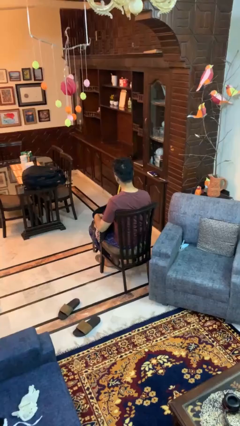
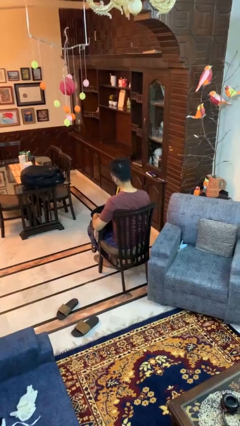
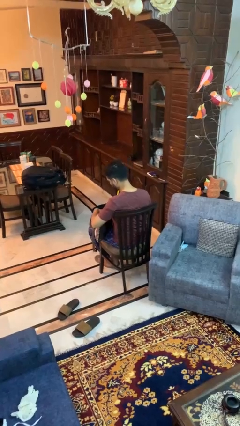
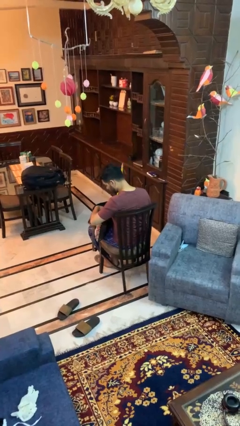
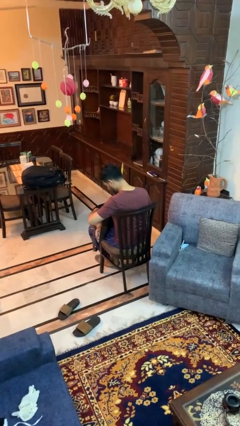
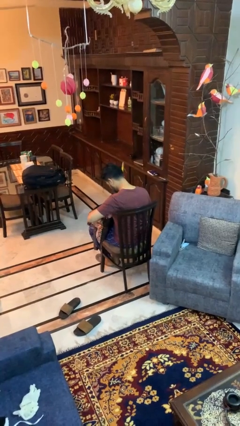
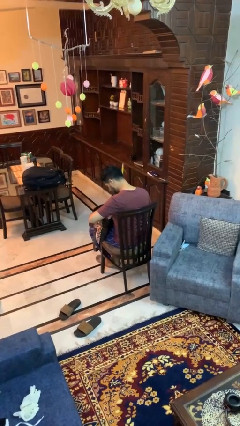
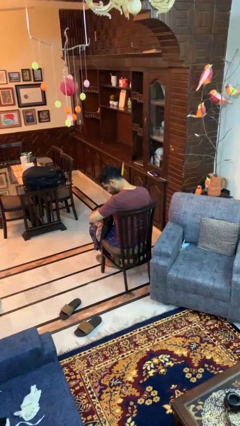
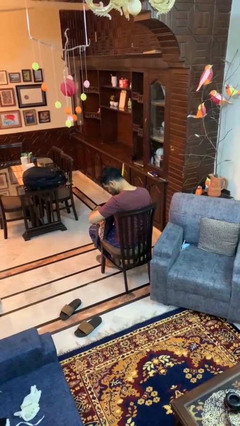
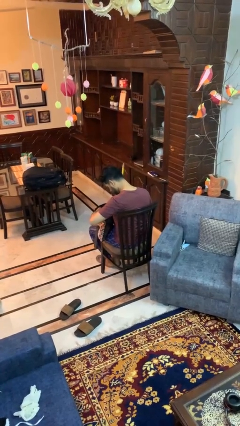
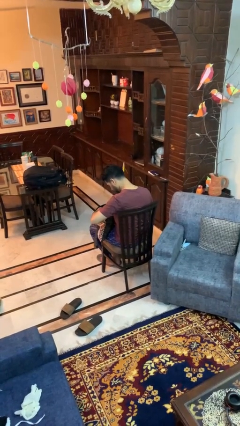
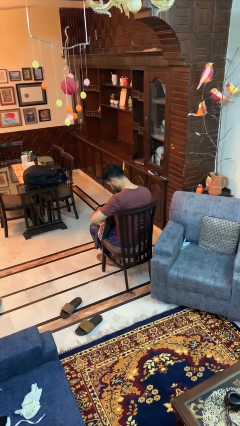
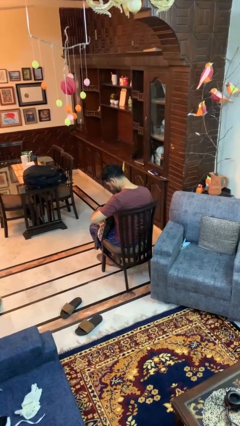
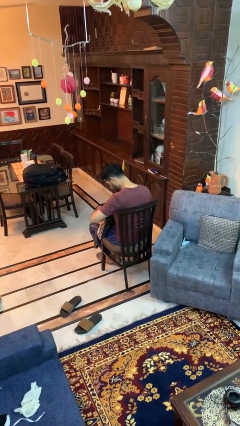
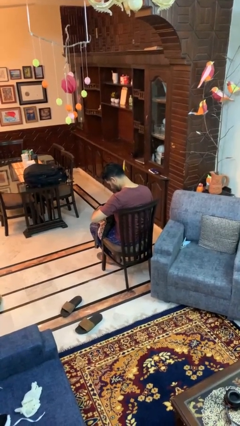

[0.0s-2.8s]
person searches in purse

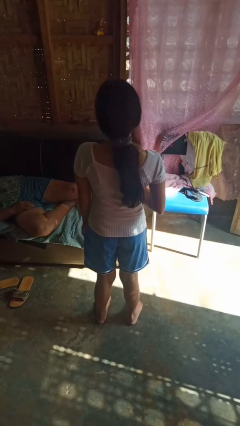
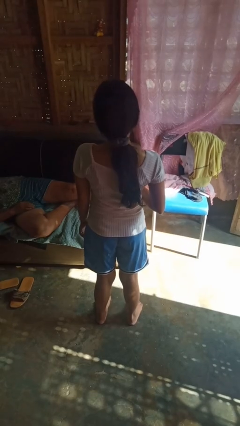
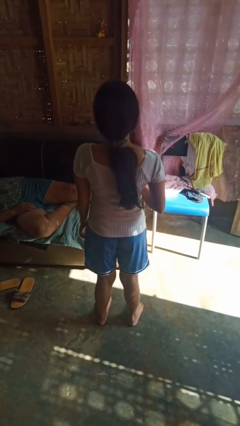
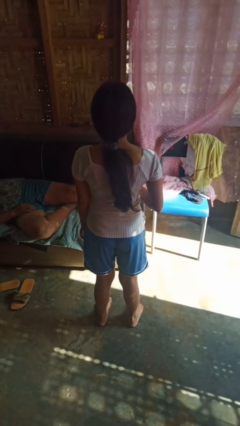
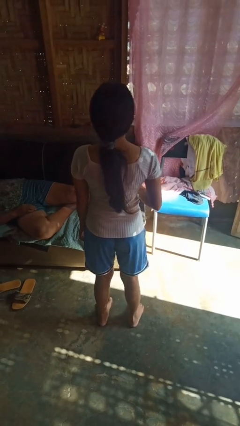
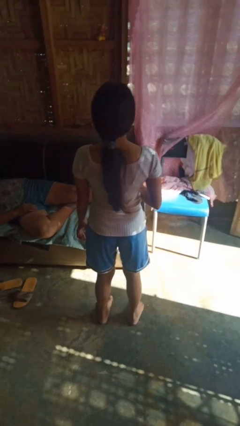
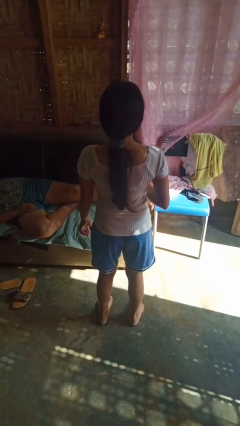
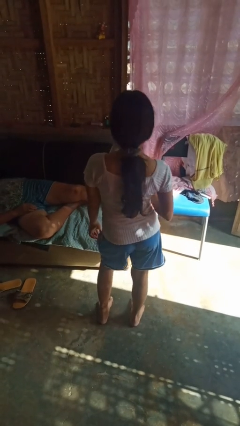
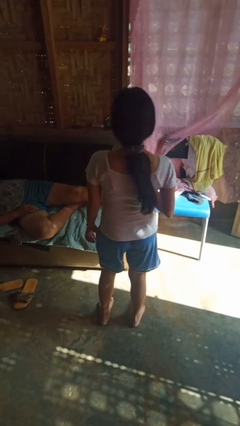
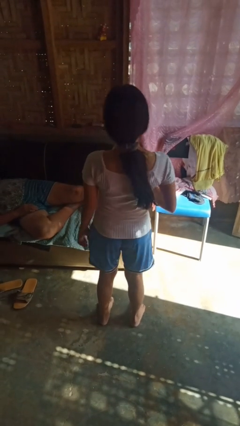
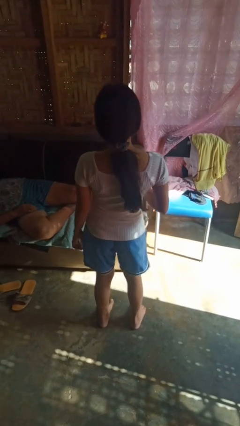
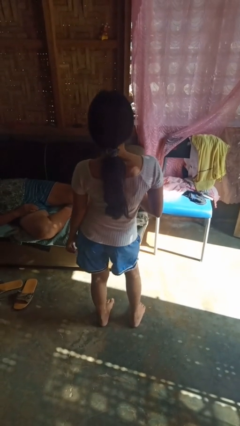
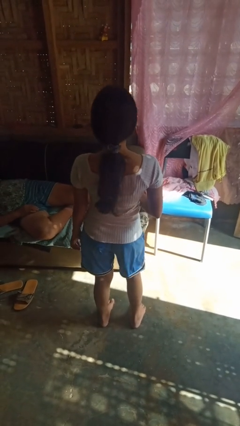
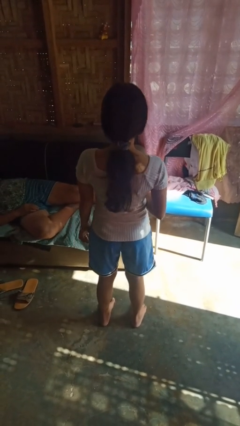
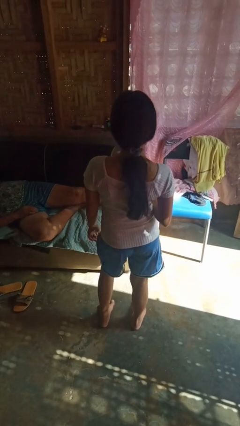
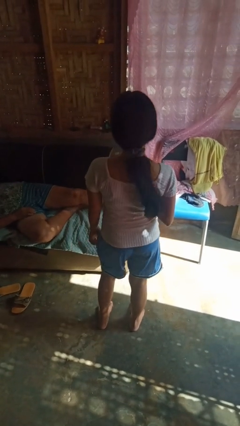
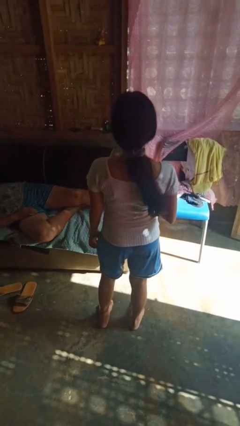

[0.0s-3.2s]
person wiggles hips

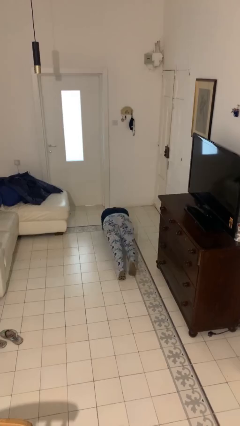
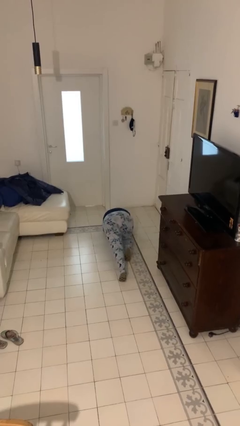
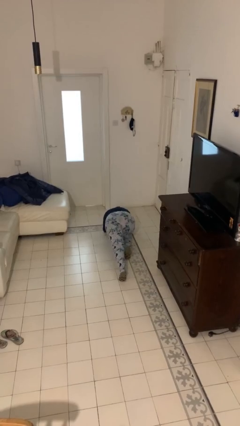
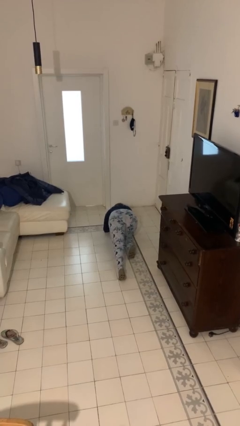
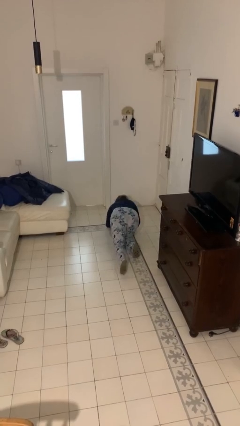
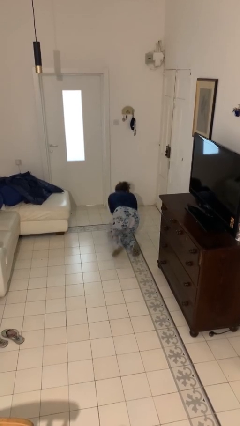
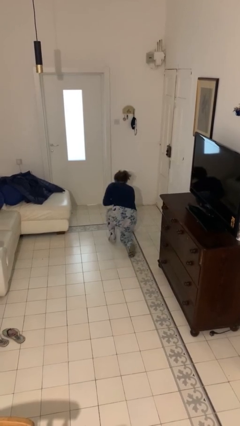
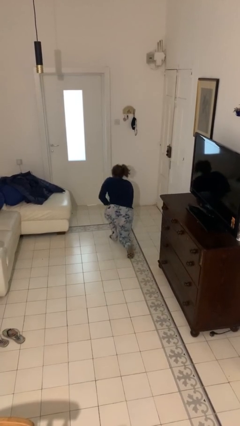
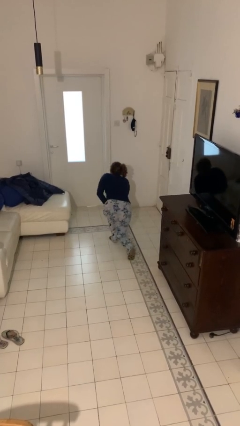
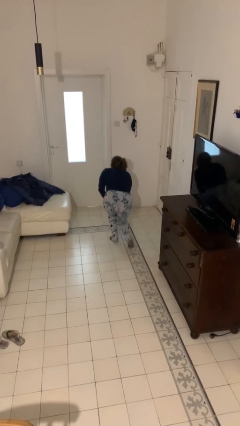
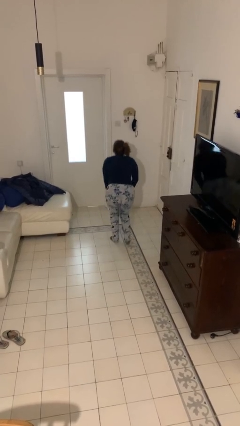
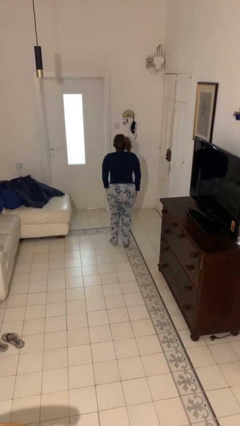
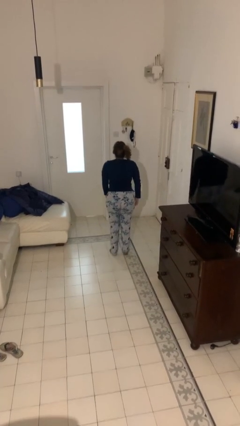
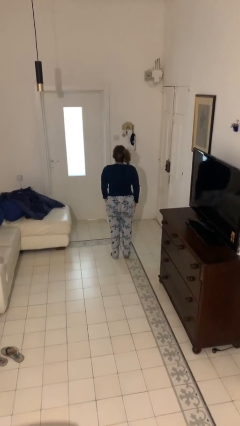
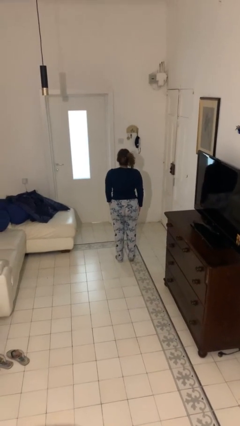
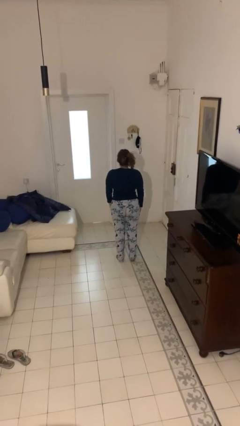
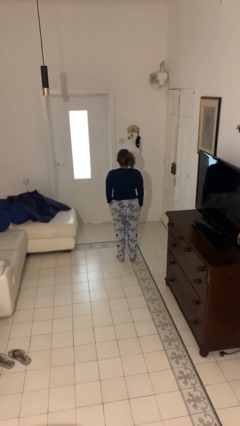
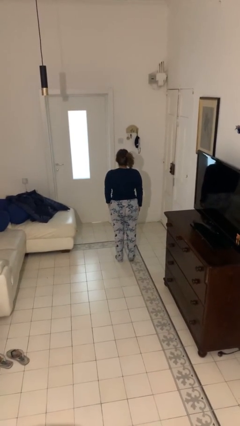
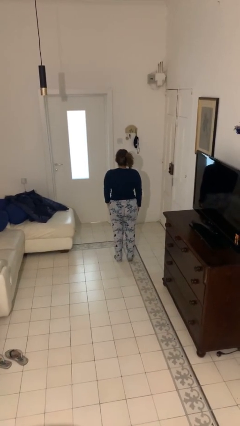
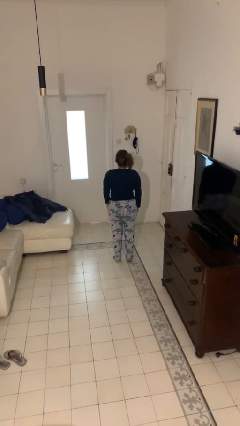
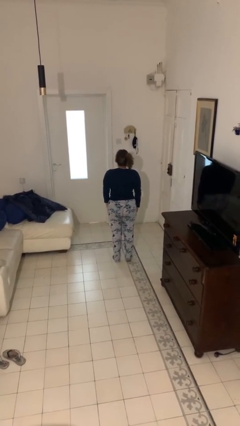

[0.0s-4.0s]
person stands up from floor

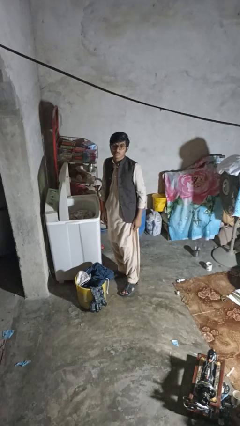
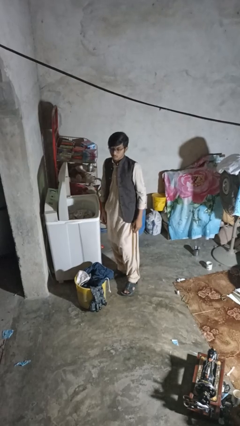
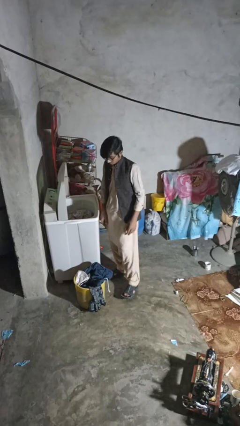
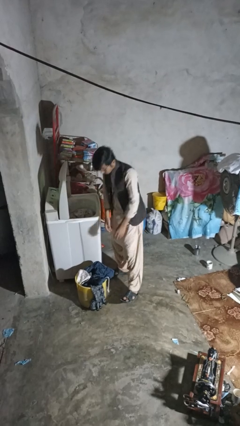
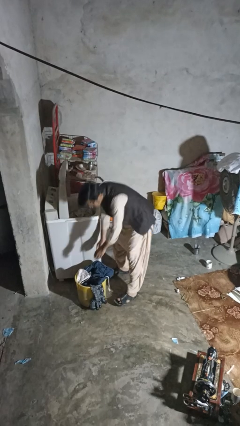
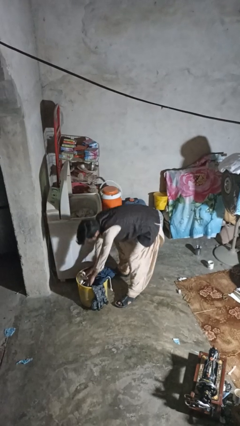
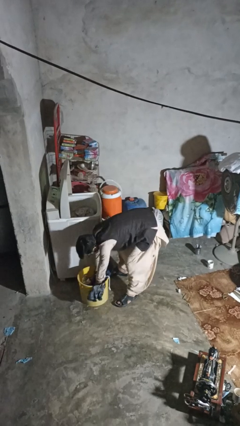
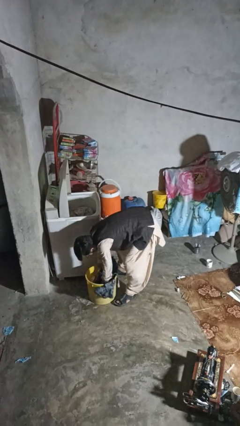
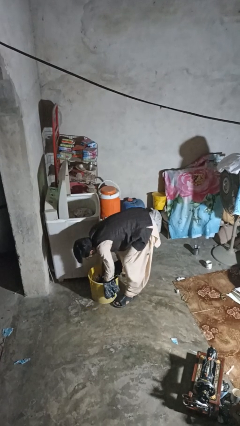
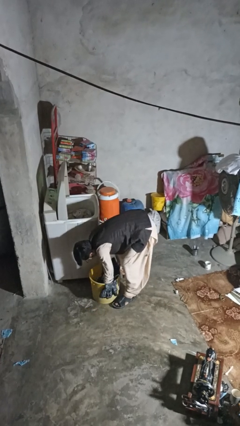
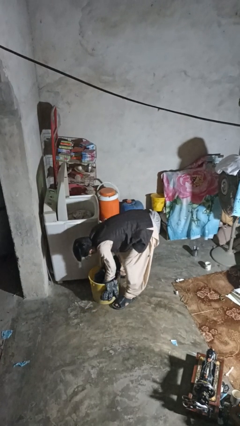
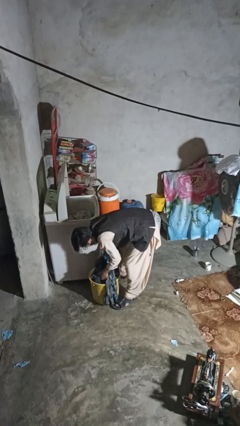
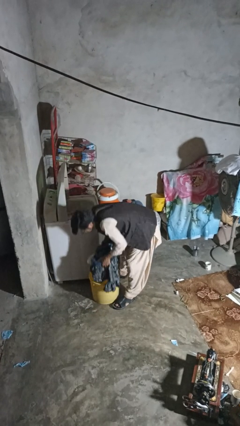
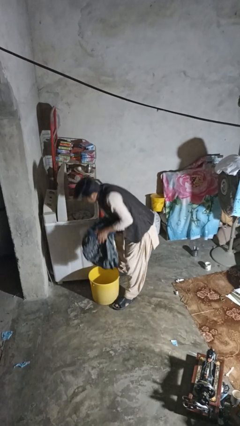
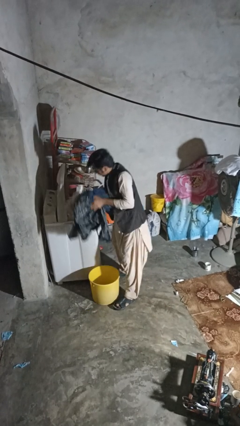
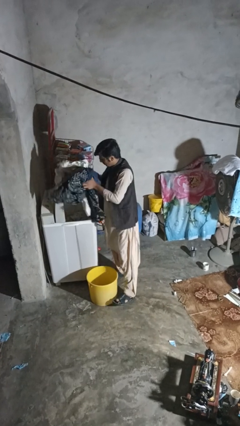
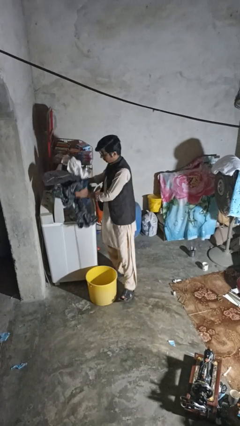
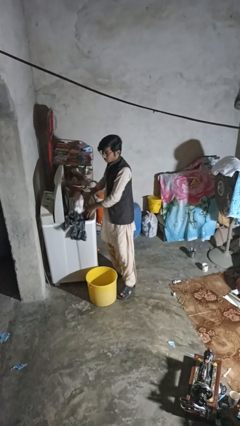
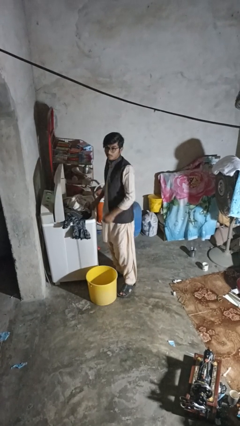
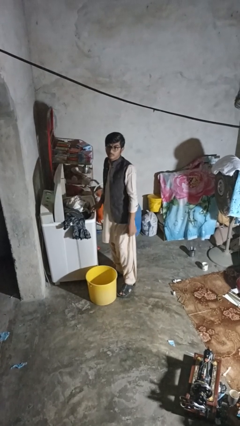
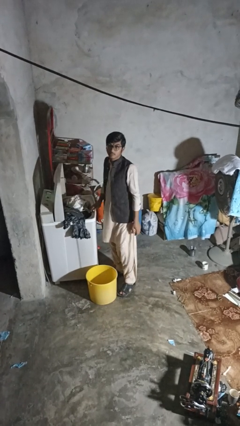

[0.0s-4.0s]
person loads dryer

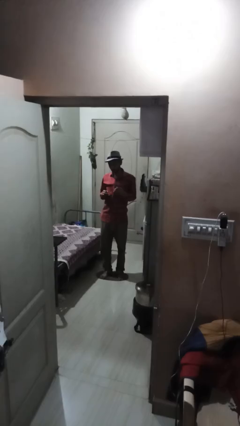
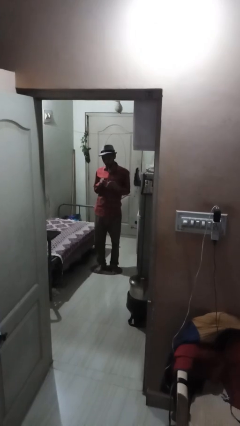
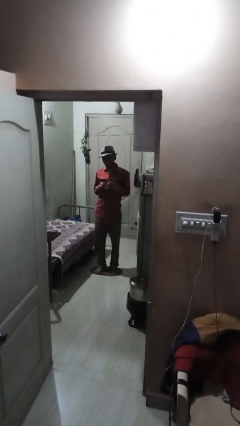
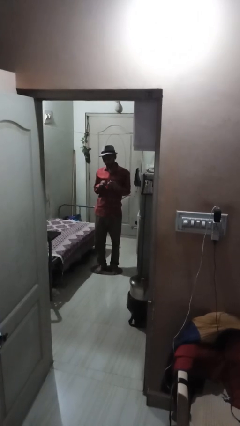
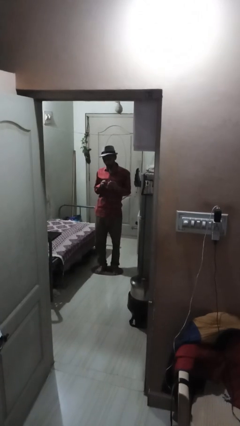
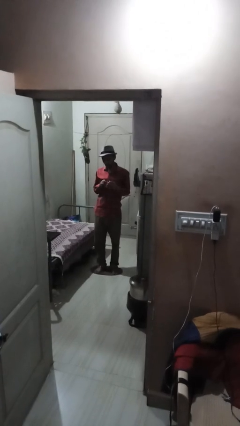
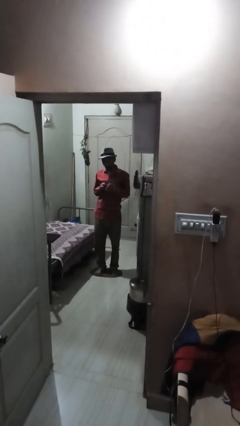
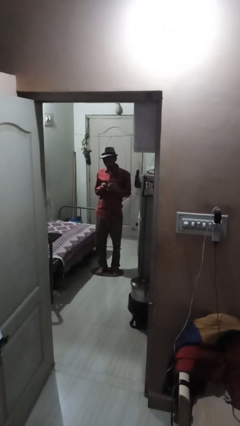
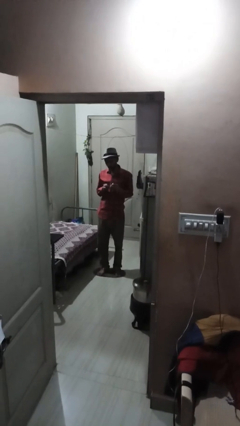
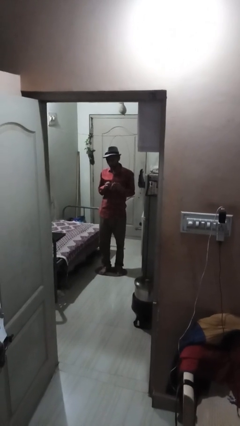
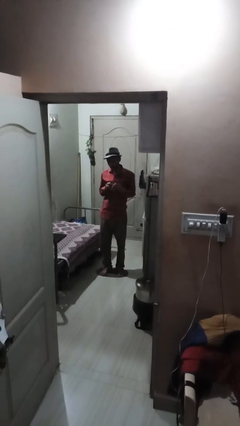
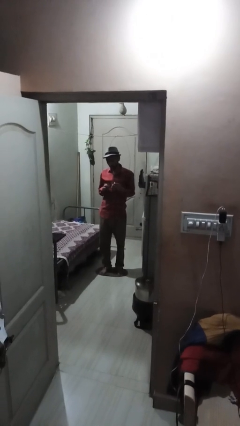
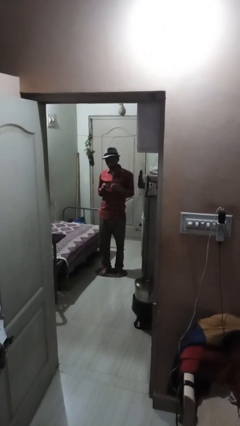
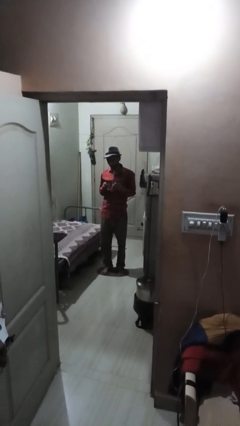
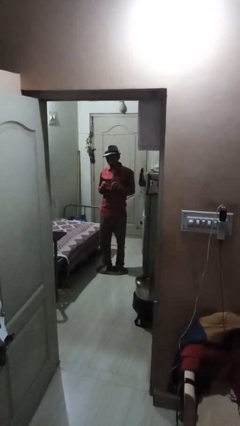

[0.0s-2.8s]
person files fingernails

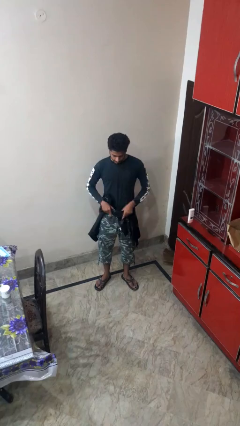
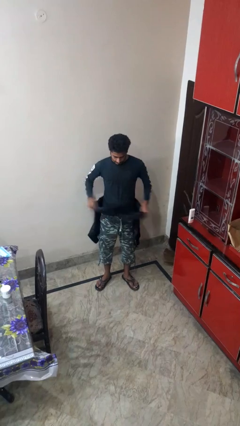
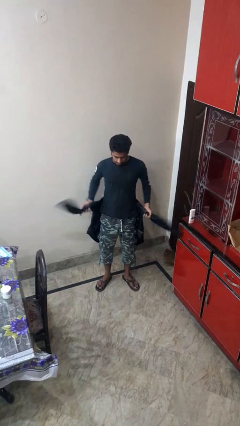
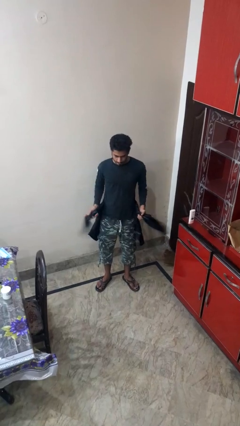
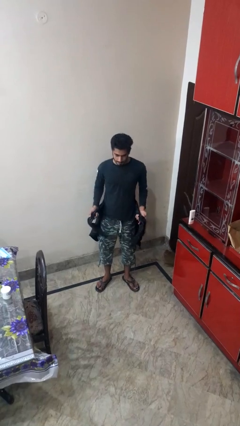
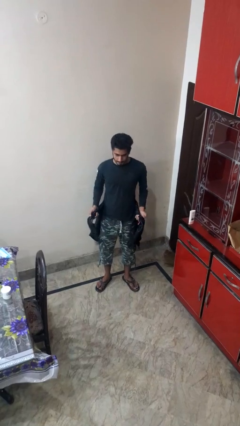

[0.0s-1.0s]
person unties jacket around waist
